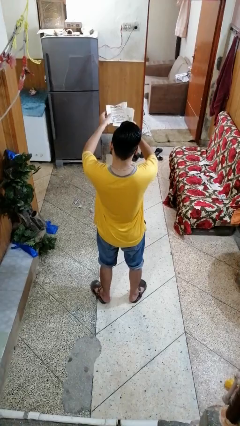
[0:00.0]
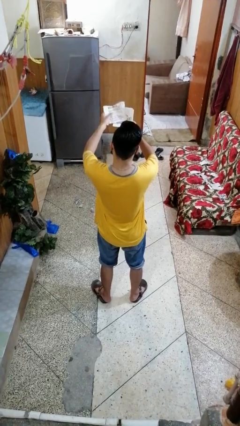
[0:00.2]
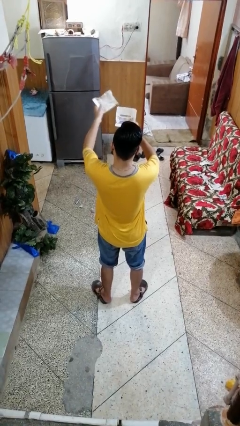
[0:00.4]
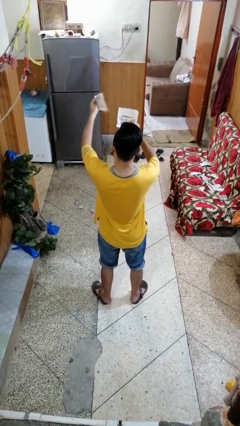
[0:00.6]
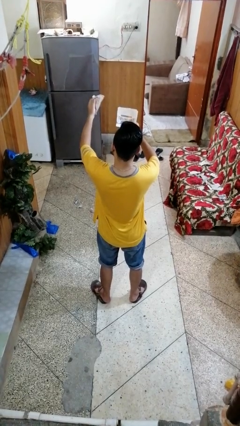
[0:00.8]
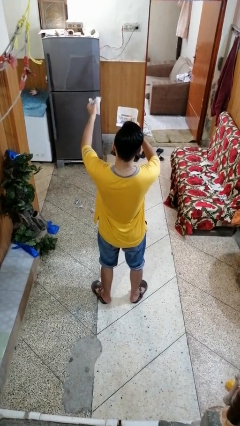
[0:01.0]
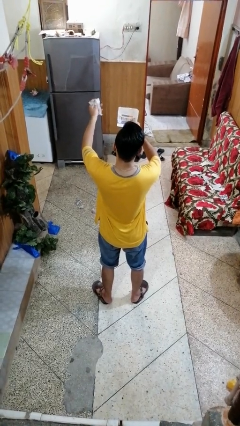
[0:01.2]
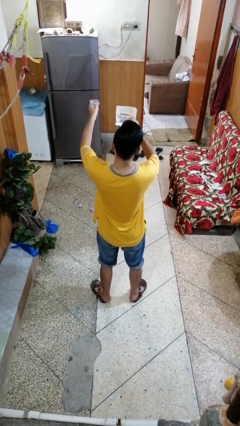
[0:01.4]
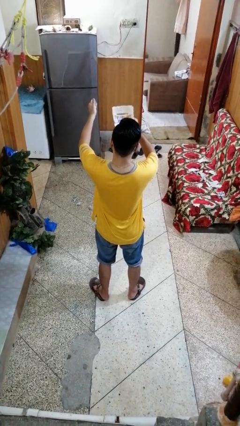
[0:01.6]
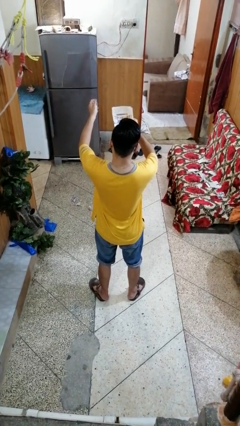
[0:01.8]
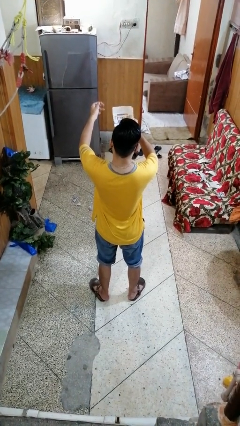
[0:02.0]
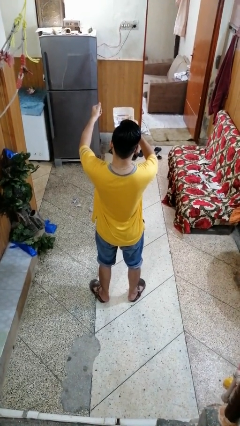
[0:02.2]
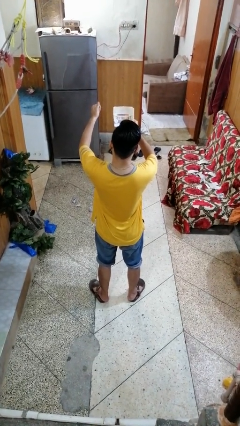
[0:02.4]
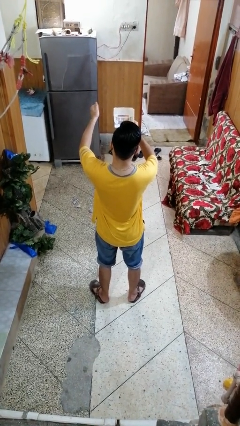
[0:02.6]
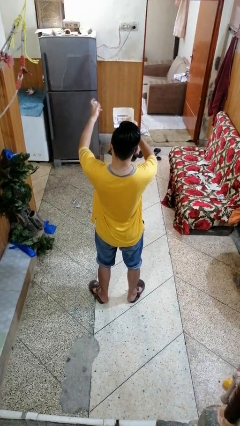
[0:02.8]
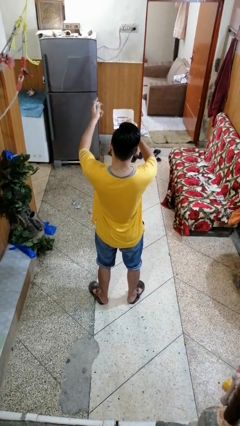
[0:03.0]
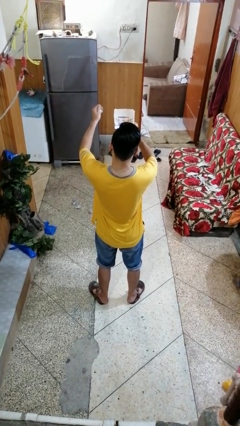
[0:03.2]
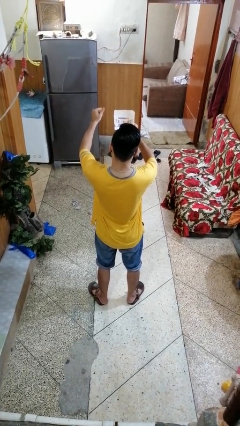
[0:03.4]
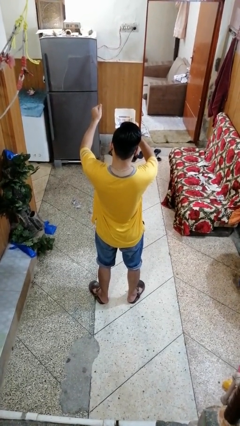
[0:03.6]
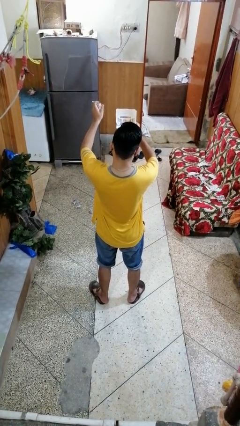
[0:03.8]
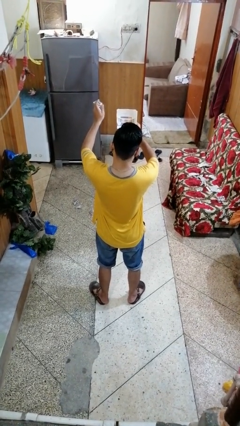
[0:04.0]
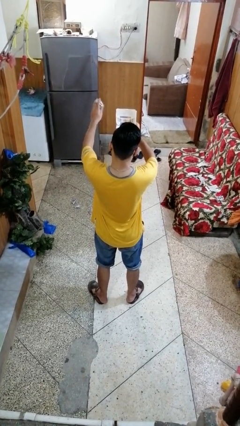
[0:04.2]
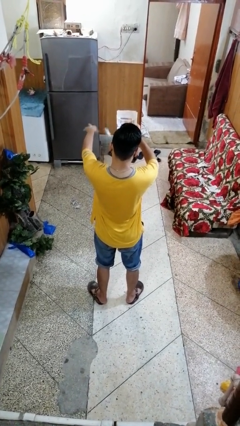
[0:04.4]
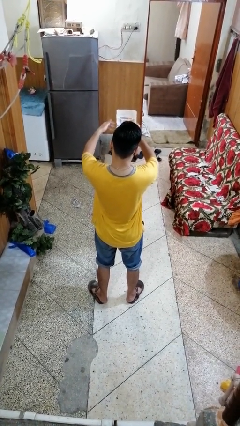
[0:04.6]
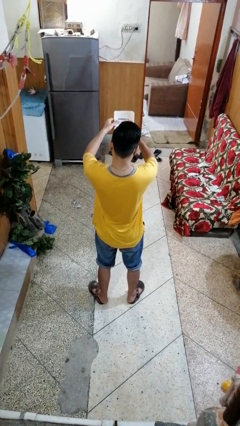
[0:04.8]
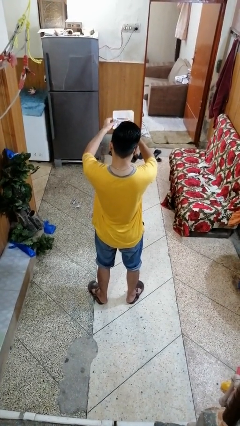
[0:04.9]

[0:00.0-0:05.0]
person crumples paper

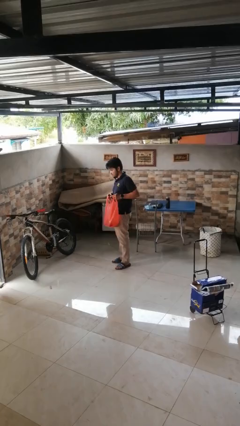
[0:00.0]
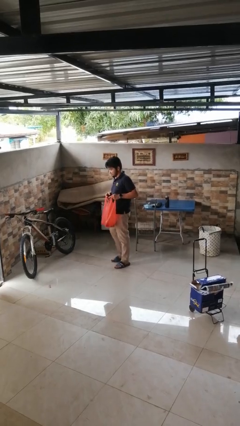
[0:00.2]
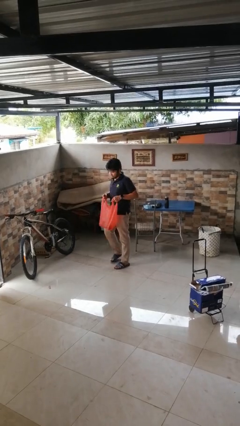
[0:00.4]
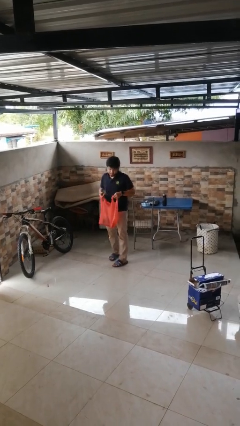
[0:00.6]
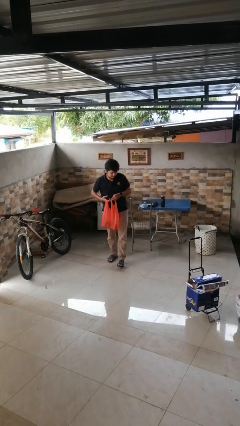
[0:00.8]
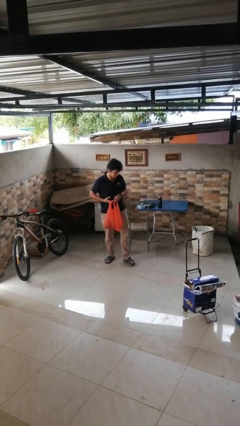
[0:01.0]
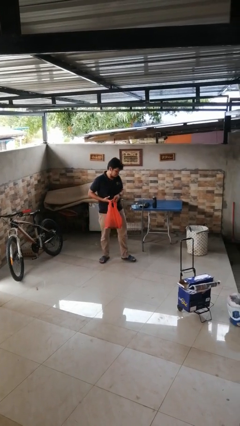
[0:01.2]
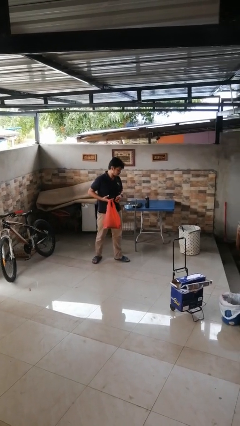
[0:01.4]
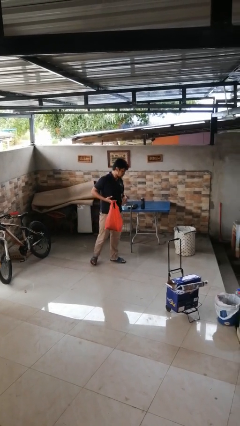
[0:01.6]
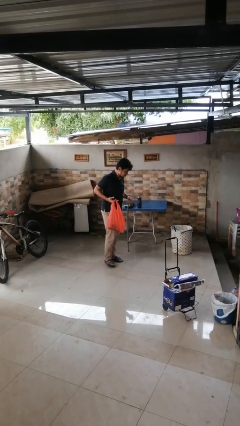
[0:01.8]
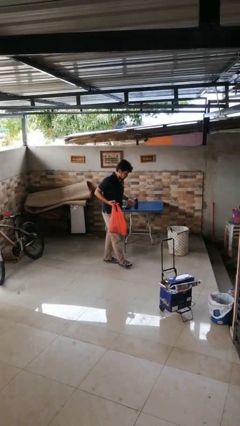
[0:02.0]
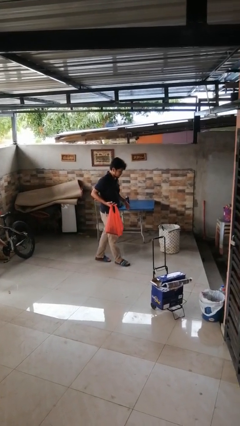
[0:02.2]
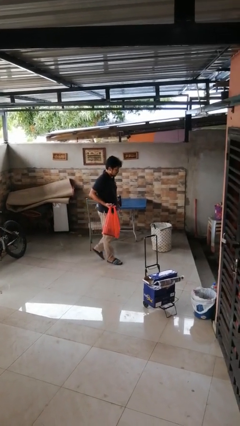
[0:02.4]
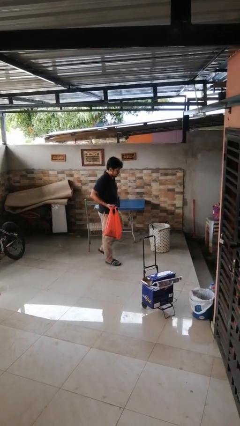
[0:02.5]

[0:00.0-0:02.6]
person carries groceries

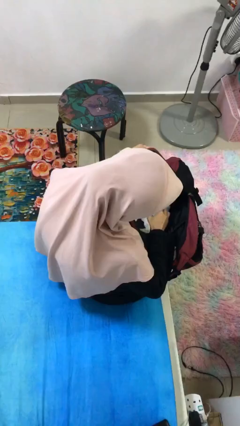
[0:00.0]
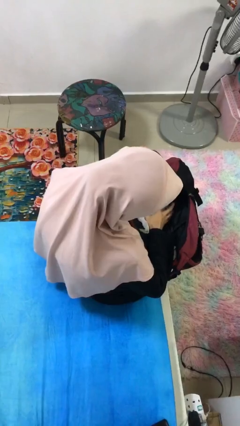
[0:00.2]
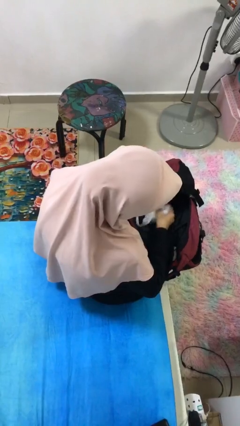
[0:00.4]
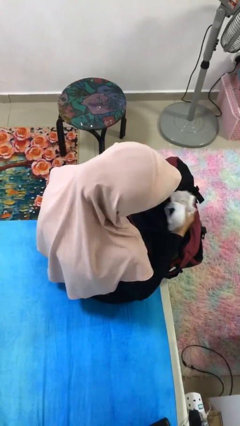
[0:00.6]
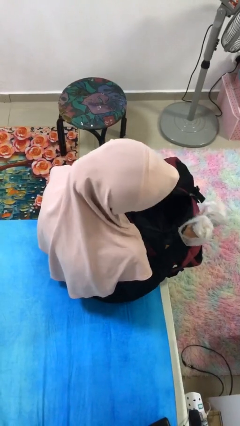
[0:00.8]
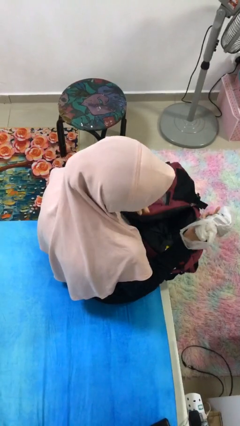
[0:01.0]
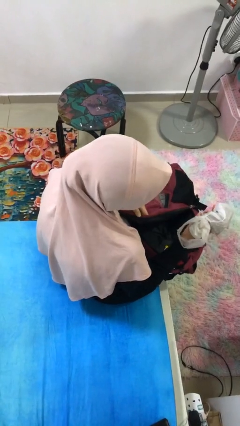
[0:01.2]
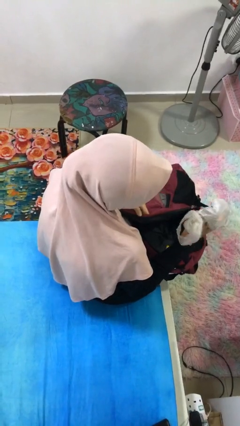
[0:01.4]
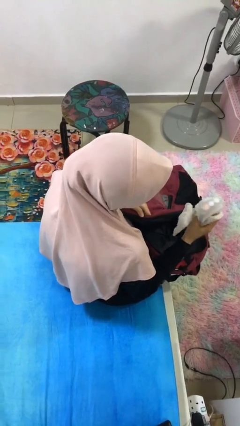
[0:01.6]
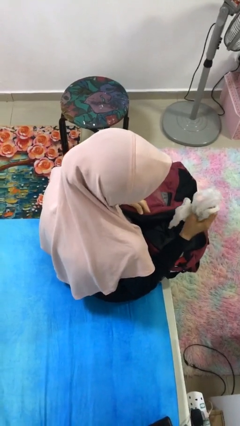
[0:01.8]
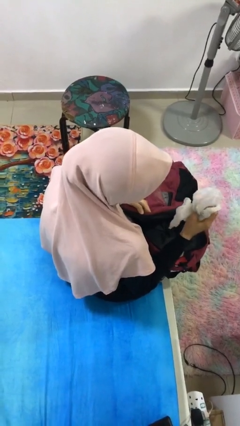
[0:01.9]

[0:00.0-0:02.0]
person takes object from backpack

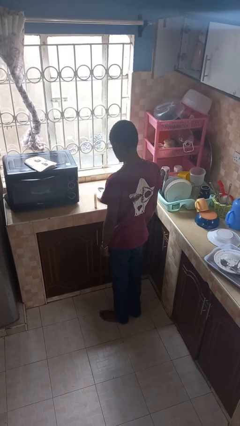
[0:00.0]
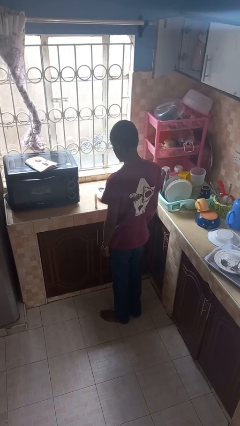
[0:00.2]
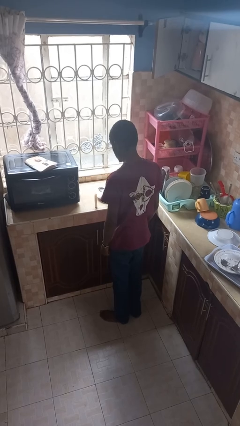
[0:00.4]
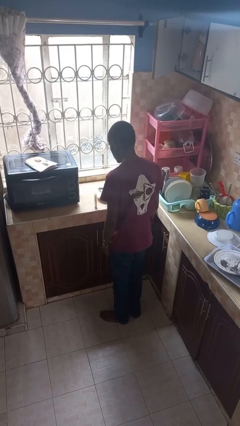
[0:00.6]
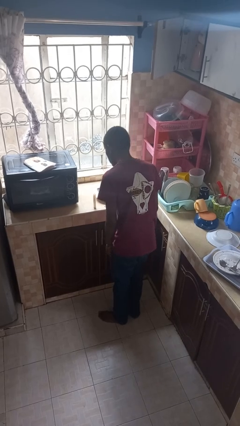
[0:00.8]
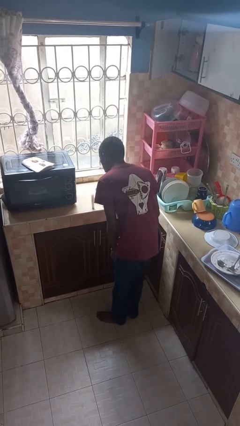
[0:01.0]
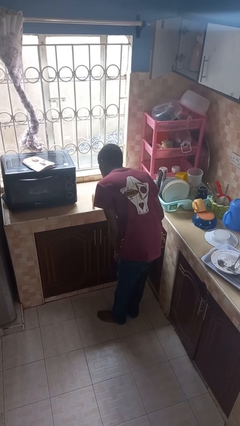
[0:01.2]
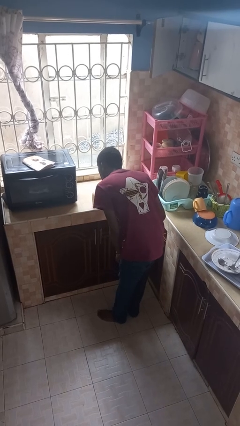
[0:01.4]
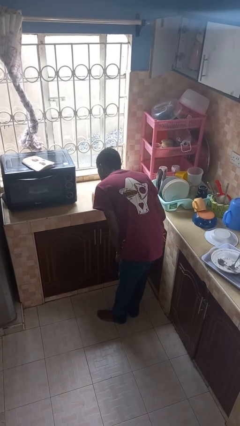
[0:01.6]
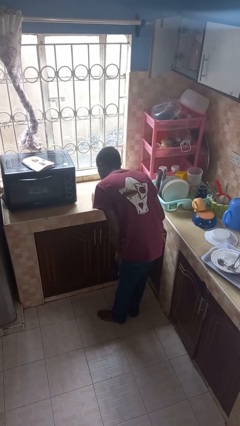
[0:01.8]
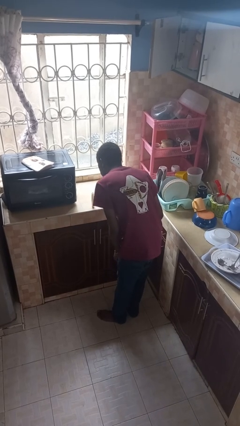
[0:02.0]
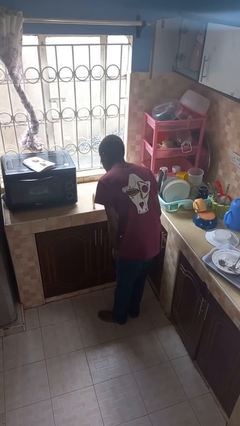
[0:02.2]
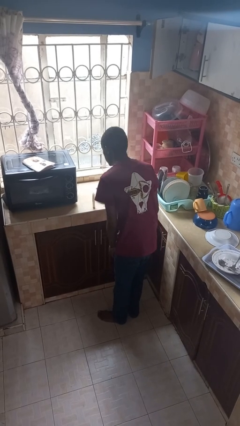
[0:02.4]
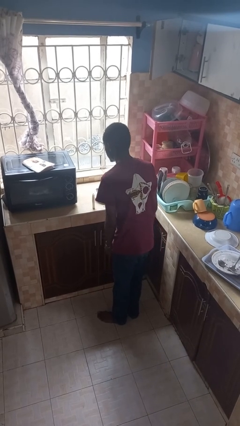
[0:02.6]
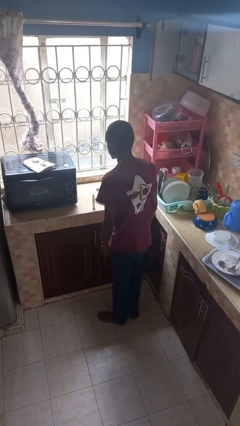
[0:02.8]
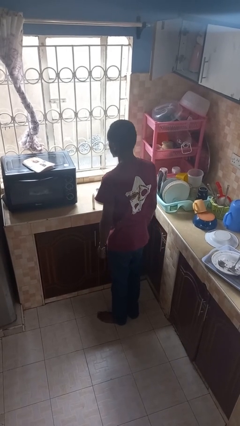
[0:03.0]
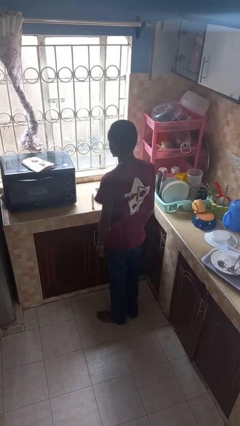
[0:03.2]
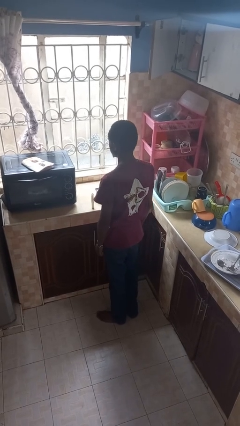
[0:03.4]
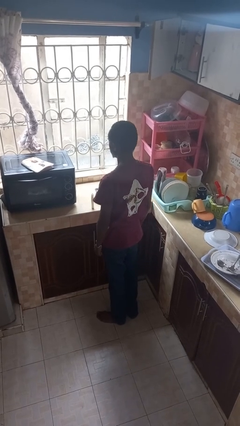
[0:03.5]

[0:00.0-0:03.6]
person extinguishes candle

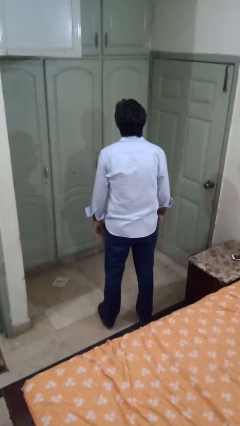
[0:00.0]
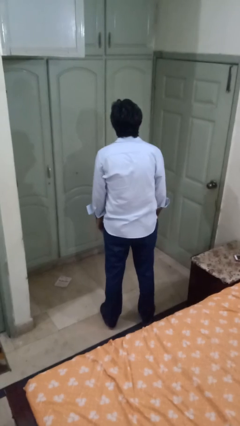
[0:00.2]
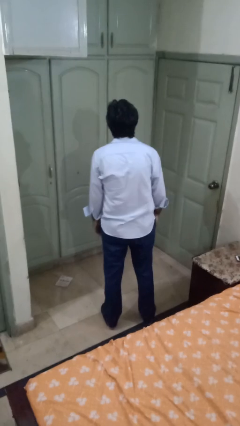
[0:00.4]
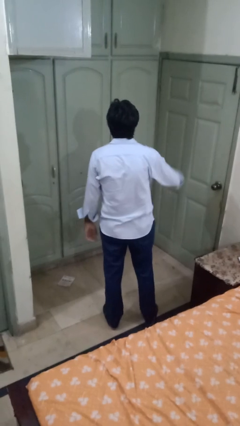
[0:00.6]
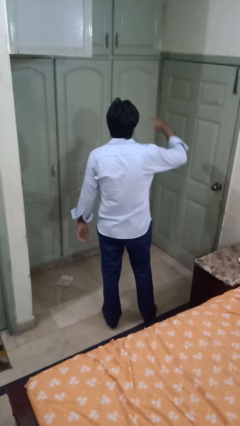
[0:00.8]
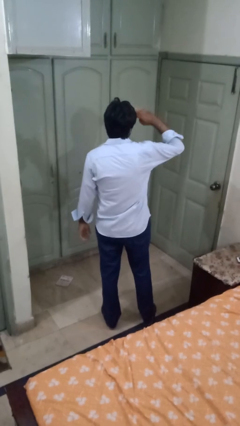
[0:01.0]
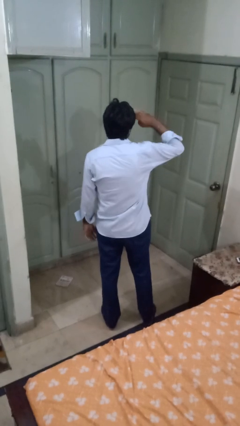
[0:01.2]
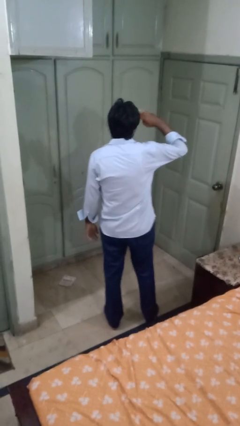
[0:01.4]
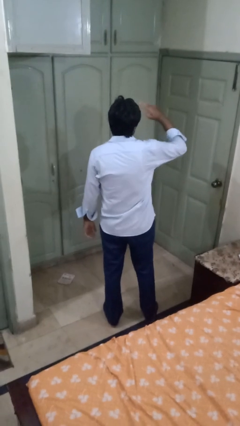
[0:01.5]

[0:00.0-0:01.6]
person salutes

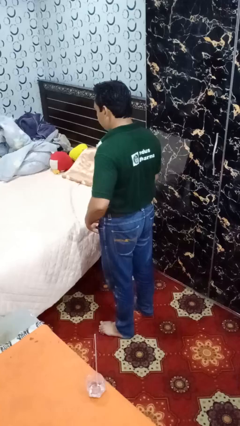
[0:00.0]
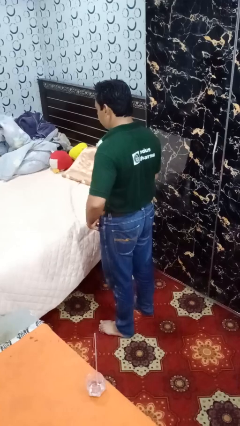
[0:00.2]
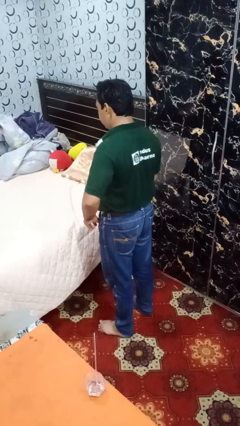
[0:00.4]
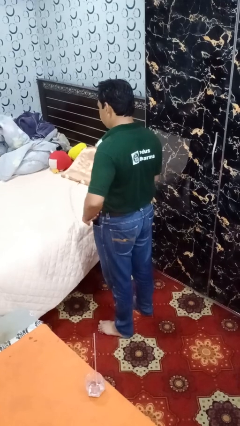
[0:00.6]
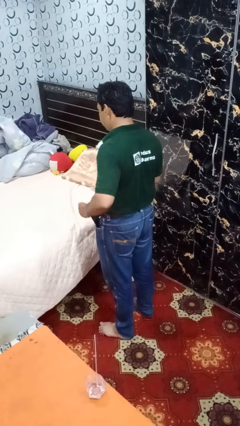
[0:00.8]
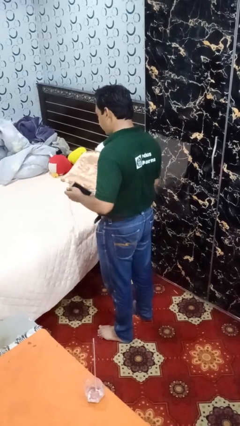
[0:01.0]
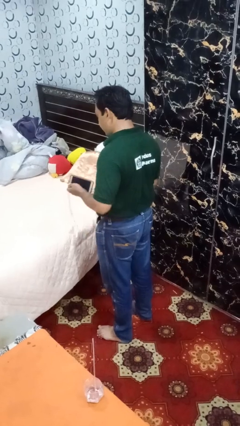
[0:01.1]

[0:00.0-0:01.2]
person takes phone from pocket

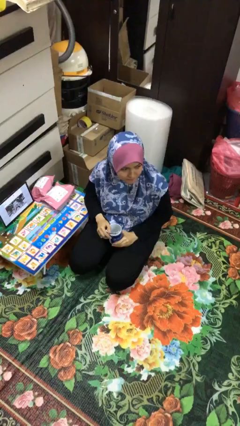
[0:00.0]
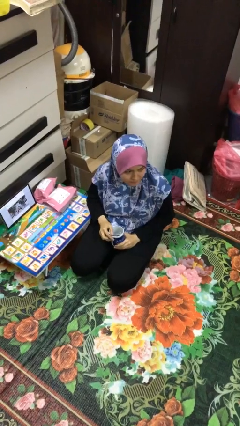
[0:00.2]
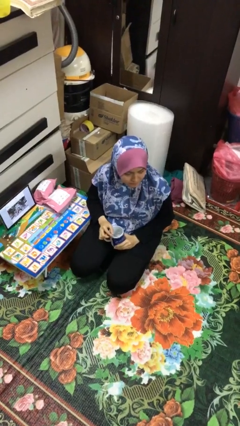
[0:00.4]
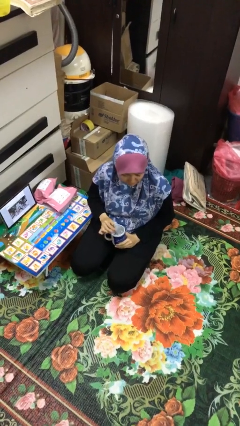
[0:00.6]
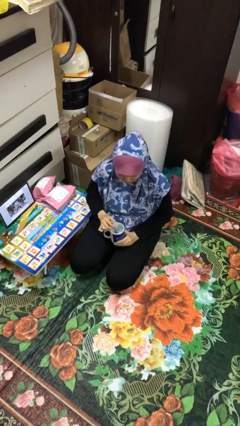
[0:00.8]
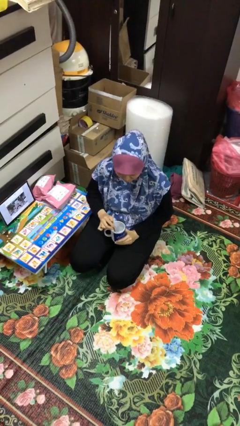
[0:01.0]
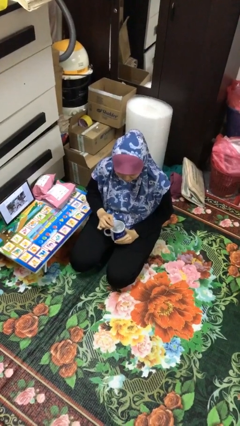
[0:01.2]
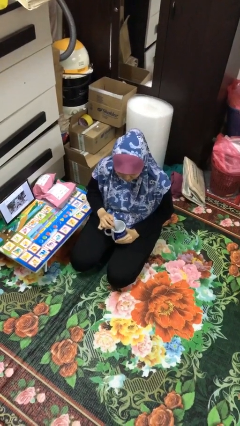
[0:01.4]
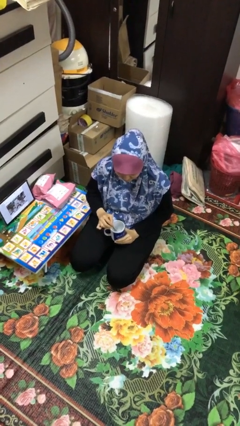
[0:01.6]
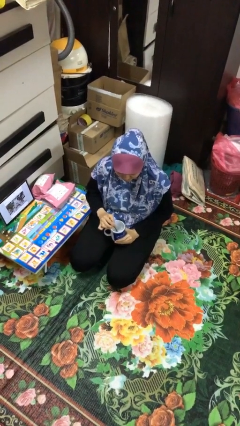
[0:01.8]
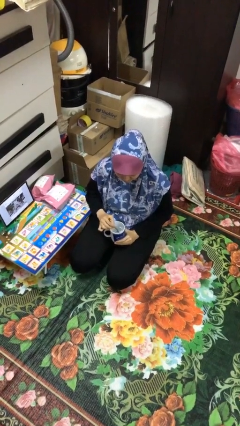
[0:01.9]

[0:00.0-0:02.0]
person stirs mug
